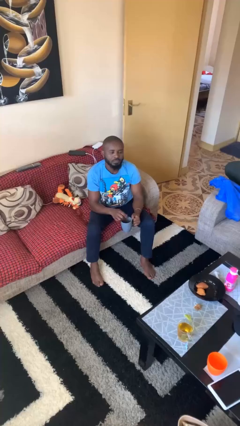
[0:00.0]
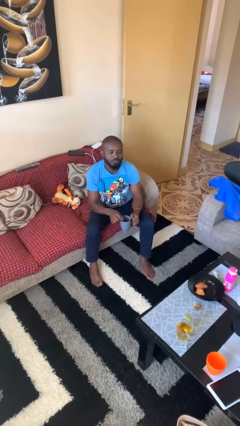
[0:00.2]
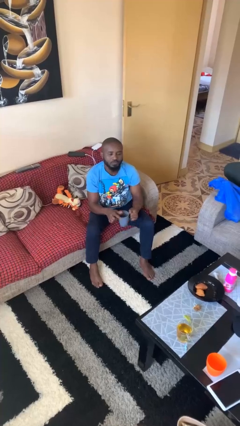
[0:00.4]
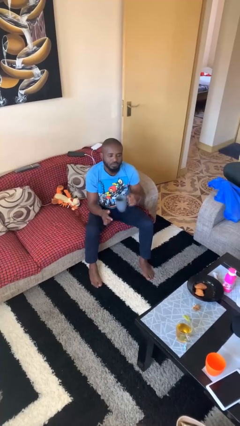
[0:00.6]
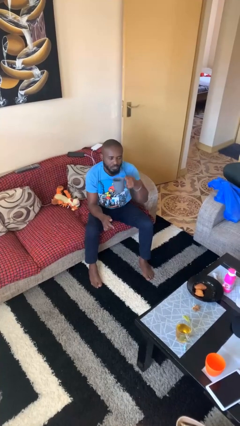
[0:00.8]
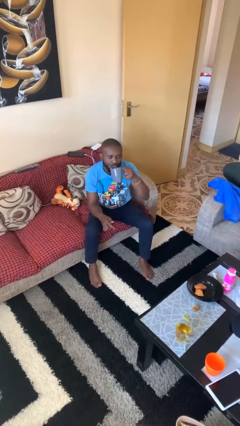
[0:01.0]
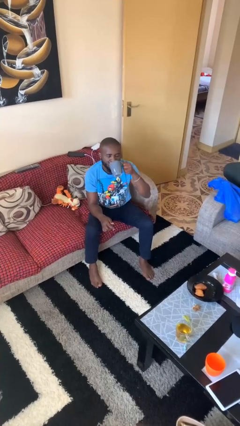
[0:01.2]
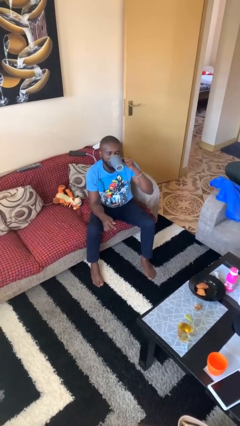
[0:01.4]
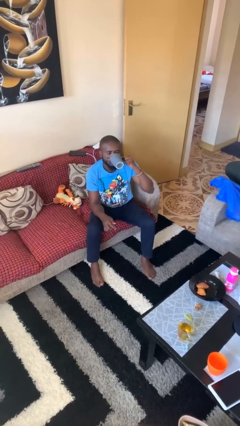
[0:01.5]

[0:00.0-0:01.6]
person drinks from mug

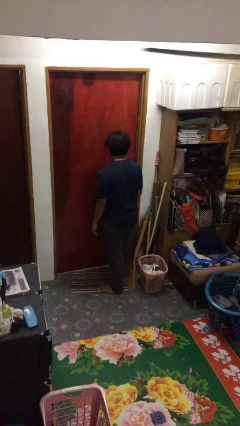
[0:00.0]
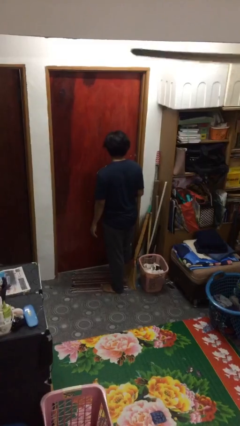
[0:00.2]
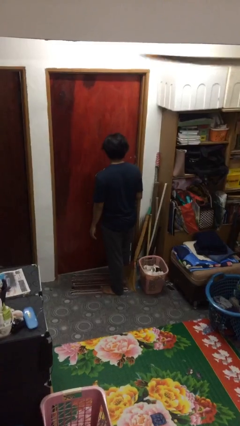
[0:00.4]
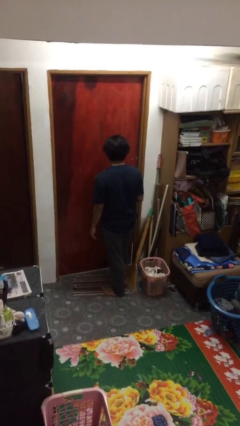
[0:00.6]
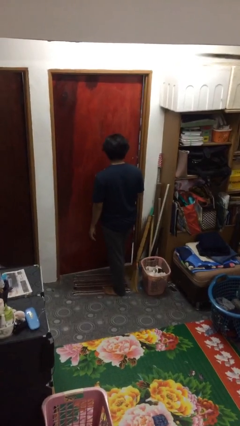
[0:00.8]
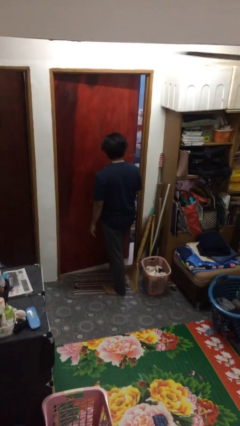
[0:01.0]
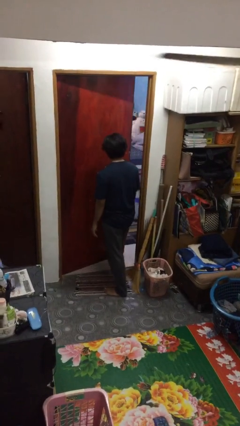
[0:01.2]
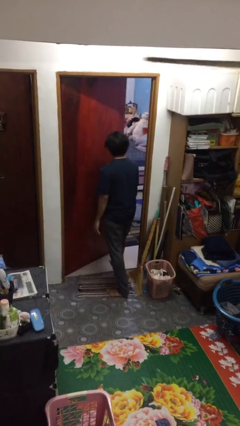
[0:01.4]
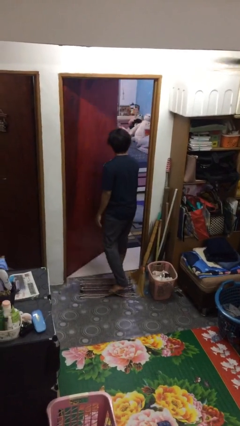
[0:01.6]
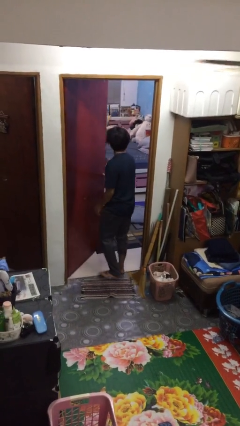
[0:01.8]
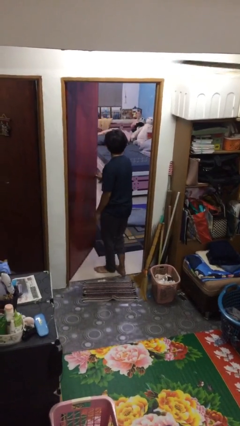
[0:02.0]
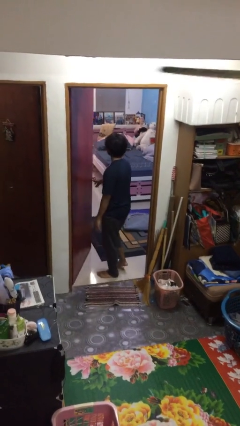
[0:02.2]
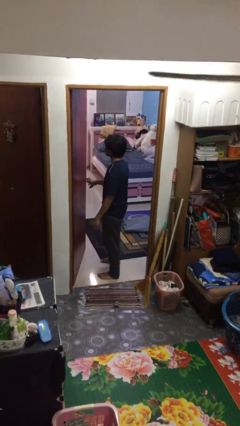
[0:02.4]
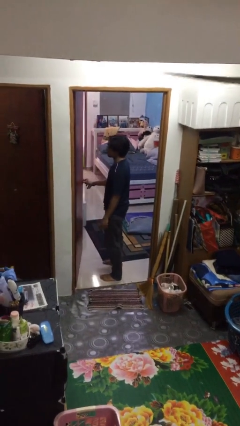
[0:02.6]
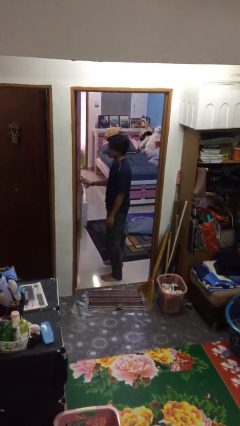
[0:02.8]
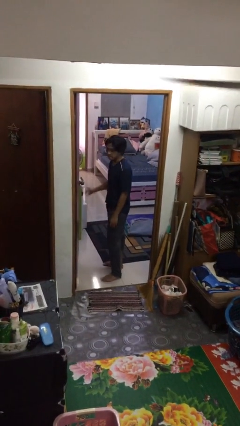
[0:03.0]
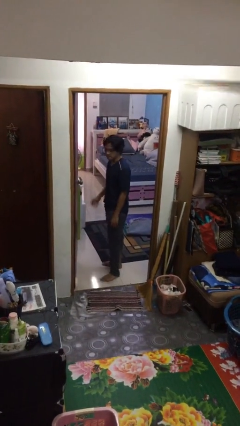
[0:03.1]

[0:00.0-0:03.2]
person opens facility door

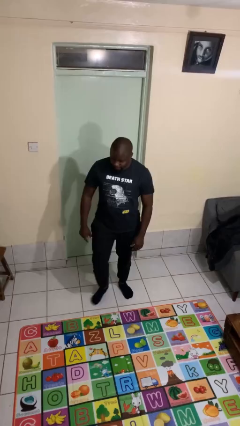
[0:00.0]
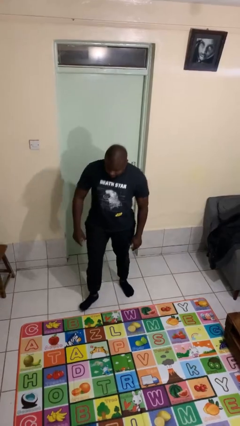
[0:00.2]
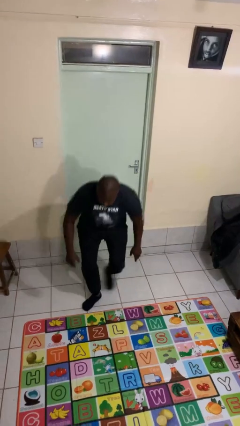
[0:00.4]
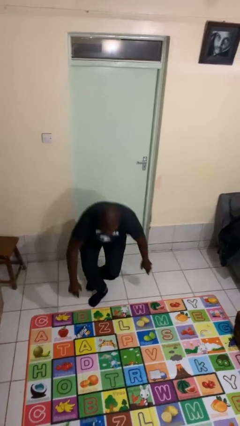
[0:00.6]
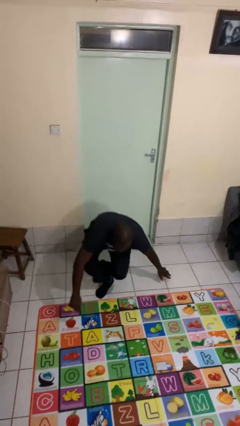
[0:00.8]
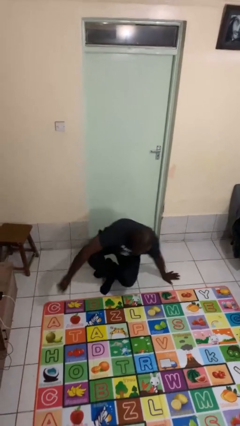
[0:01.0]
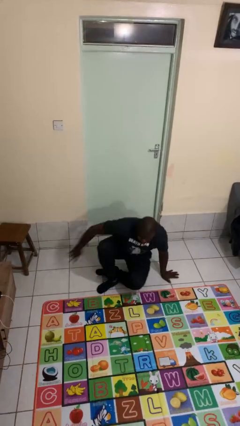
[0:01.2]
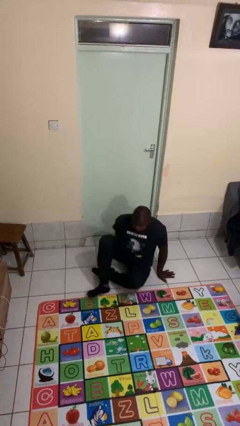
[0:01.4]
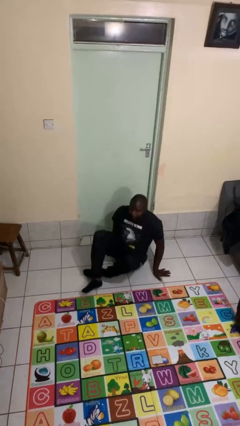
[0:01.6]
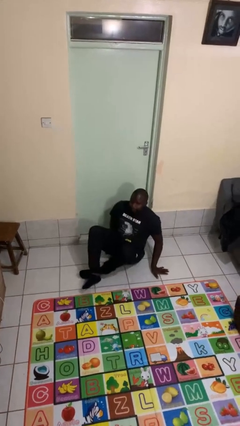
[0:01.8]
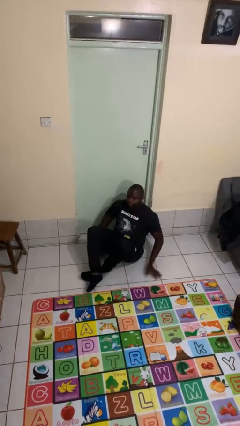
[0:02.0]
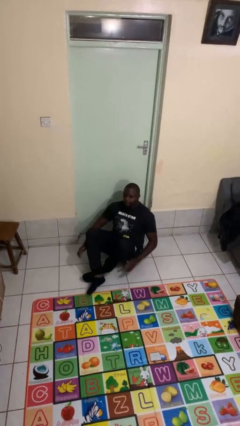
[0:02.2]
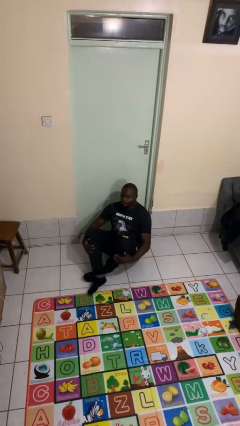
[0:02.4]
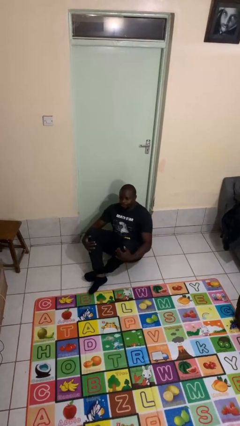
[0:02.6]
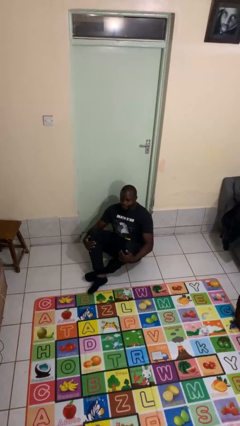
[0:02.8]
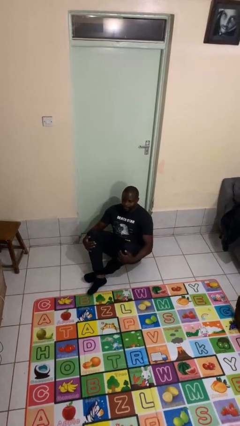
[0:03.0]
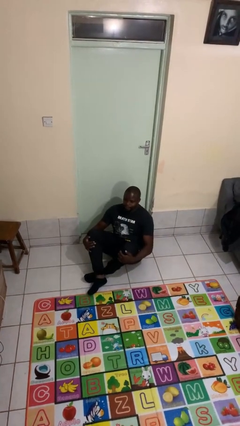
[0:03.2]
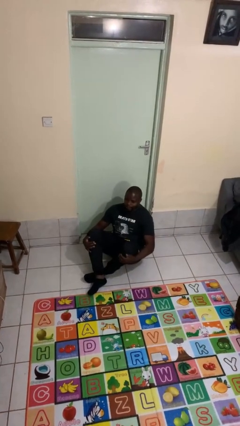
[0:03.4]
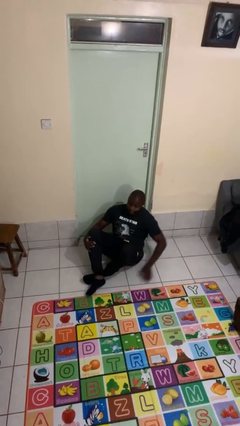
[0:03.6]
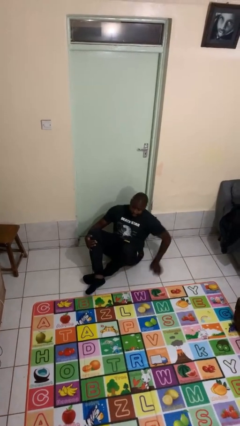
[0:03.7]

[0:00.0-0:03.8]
person sits crisscross

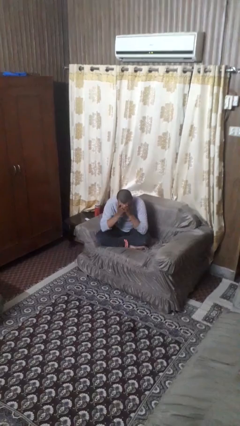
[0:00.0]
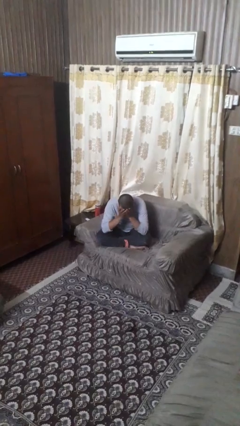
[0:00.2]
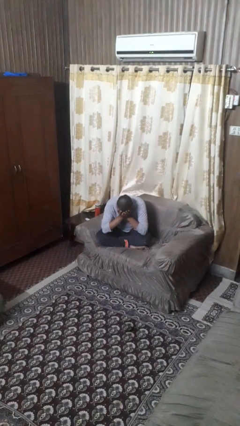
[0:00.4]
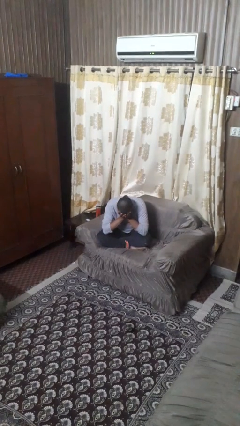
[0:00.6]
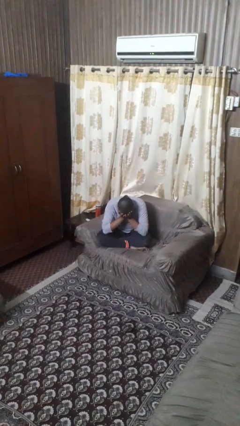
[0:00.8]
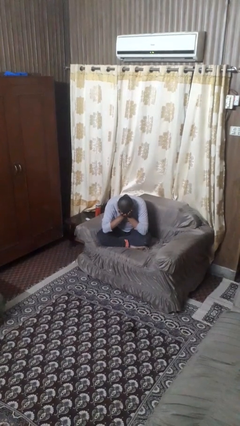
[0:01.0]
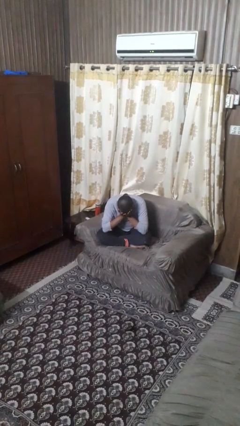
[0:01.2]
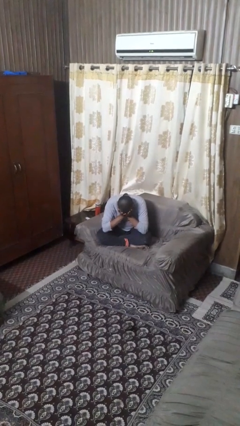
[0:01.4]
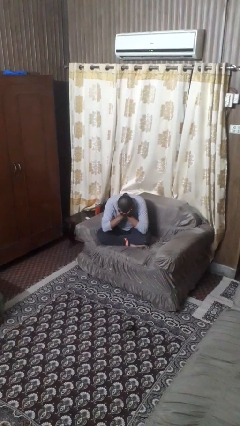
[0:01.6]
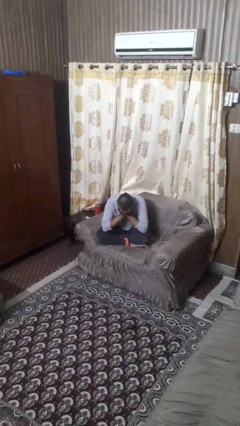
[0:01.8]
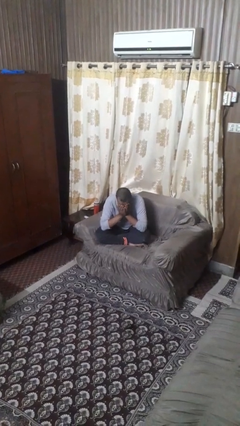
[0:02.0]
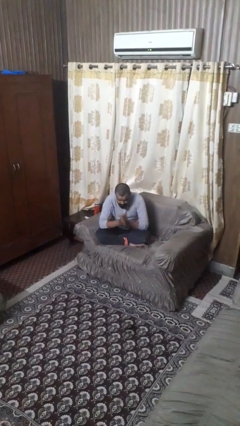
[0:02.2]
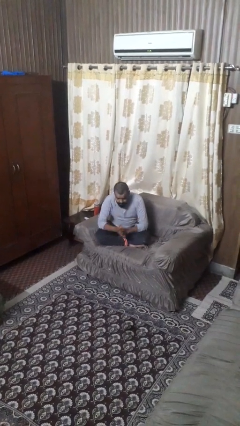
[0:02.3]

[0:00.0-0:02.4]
person covers face with hands

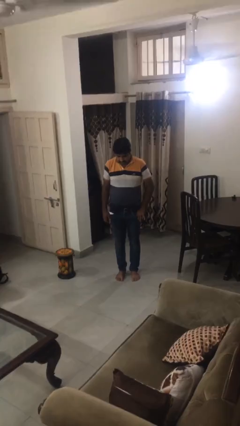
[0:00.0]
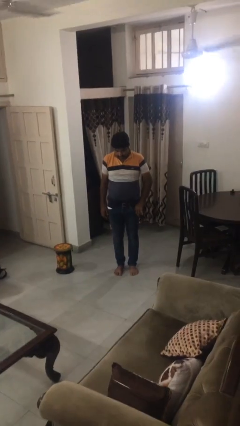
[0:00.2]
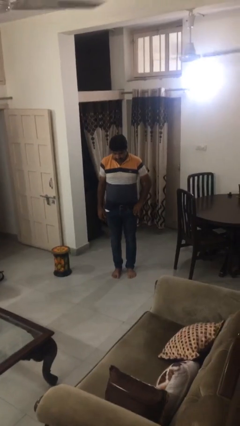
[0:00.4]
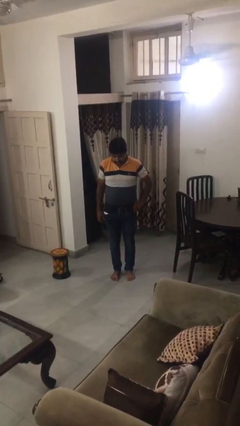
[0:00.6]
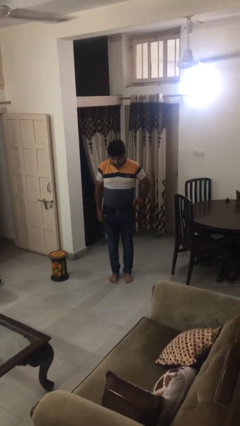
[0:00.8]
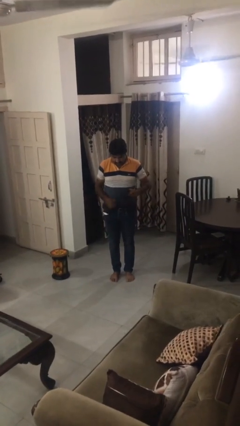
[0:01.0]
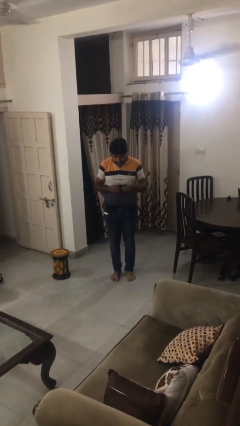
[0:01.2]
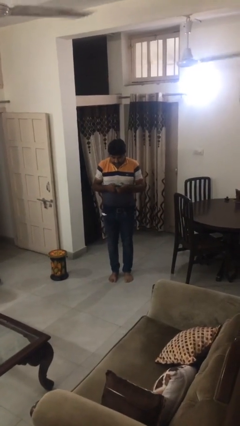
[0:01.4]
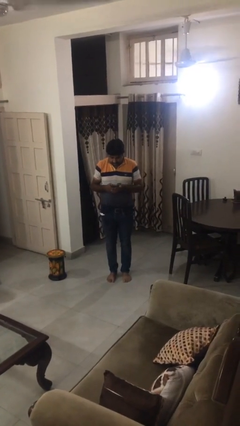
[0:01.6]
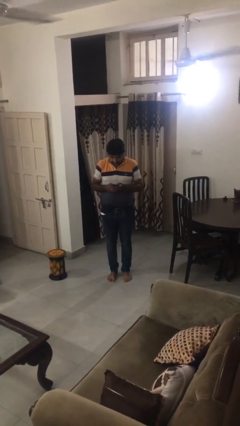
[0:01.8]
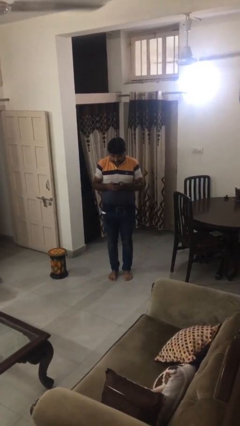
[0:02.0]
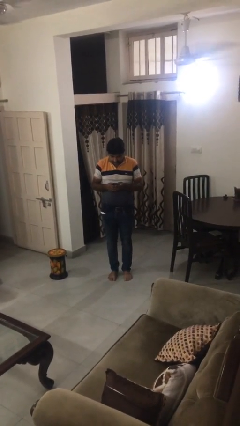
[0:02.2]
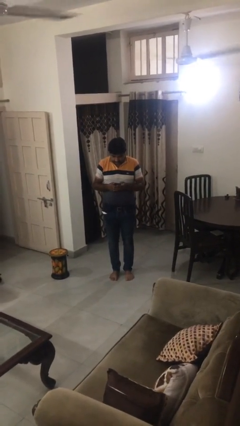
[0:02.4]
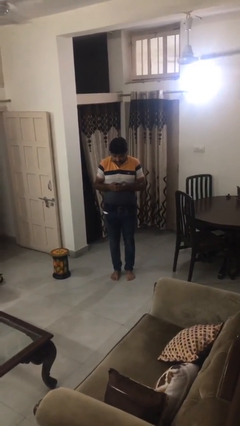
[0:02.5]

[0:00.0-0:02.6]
person takes phone from pocket

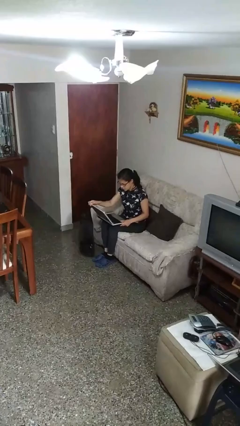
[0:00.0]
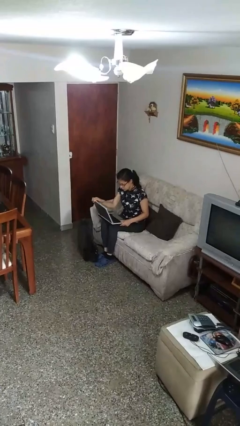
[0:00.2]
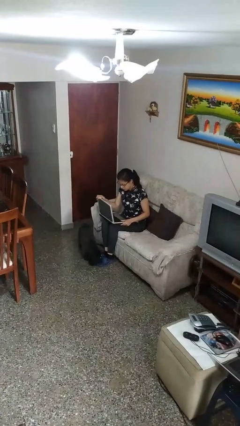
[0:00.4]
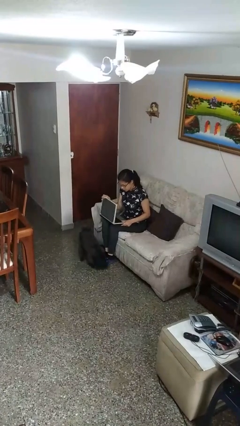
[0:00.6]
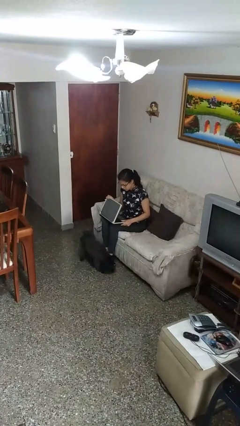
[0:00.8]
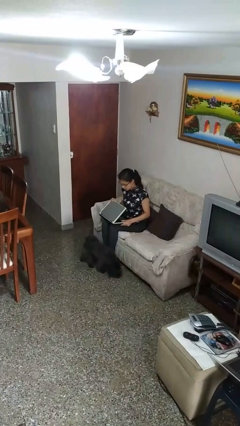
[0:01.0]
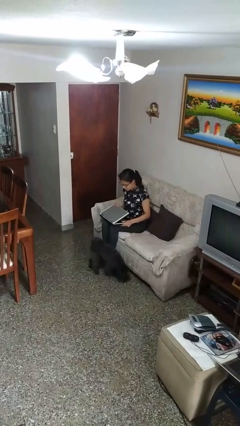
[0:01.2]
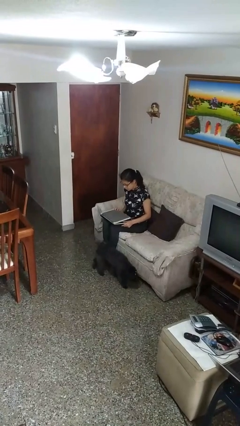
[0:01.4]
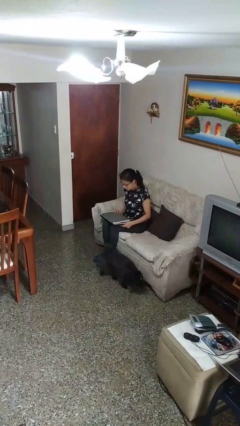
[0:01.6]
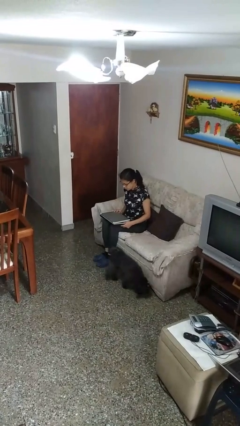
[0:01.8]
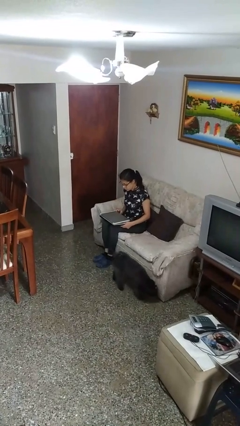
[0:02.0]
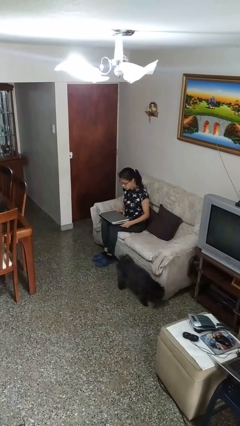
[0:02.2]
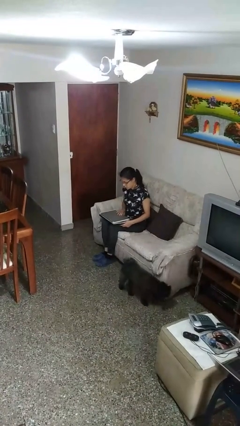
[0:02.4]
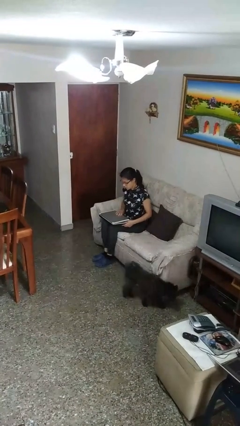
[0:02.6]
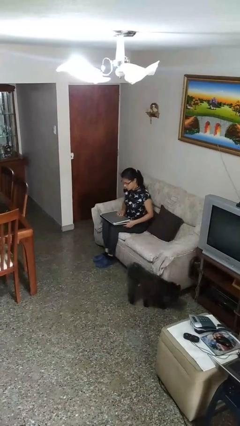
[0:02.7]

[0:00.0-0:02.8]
person closes laptop

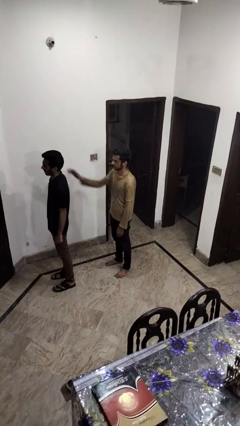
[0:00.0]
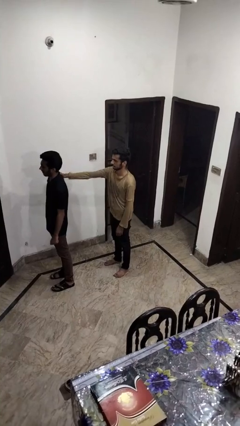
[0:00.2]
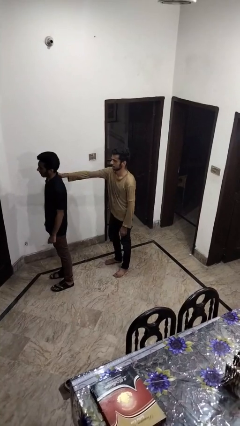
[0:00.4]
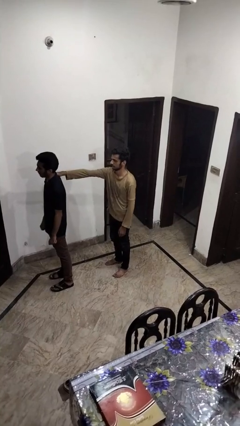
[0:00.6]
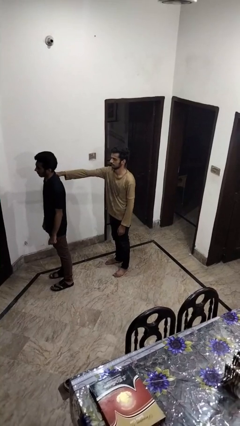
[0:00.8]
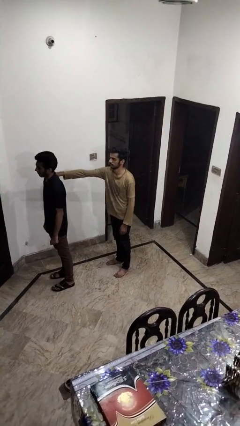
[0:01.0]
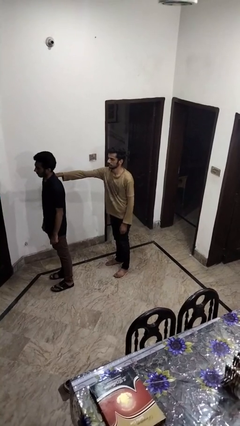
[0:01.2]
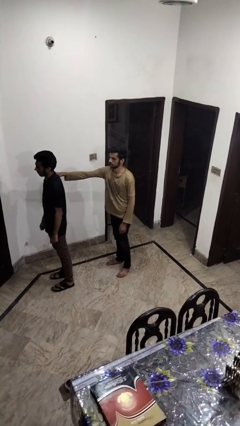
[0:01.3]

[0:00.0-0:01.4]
person grabs person by shoulder
